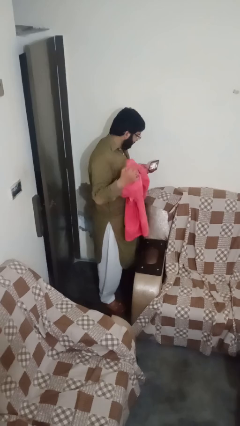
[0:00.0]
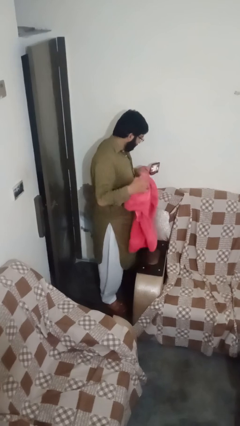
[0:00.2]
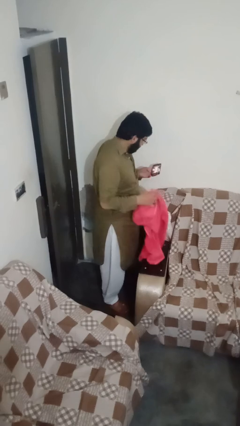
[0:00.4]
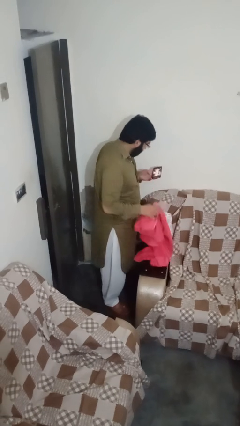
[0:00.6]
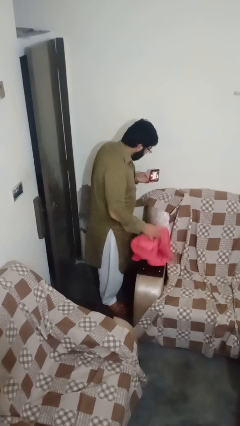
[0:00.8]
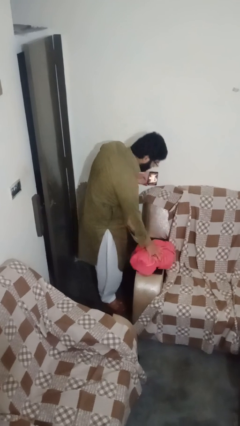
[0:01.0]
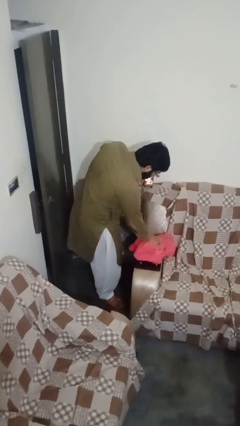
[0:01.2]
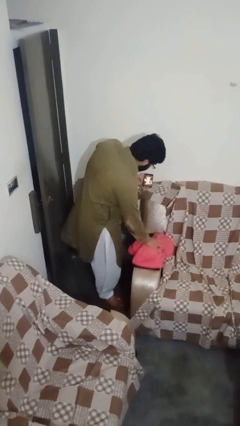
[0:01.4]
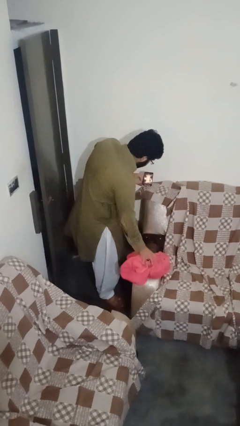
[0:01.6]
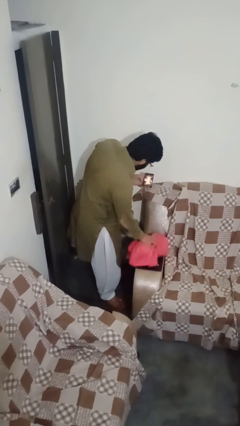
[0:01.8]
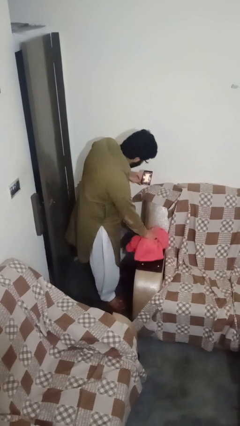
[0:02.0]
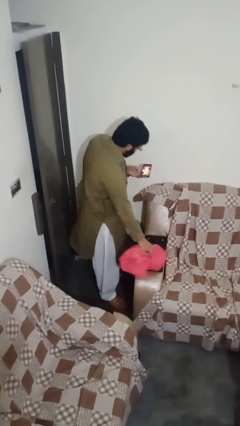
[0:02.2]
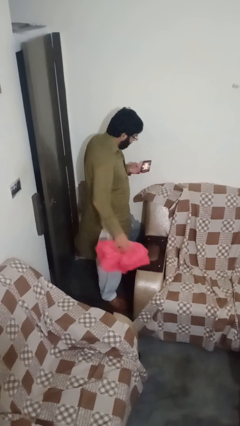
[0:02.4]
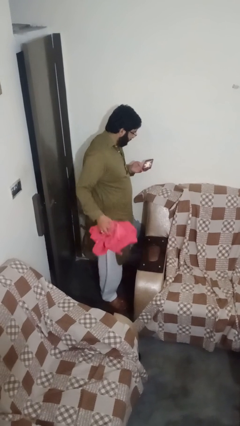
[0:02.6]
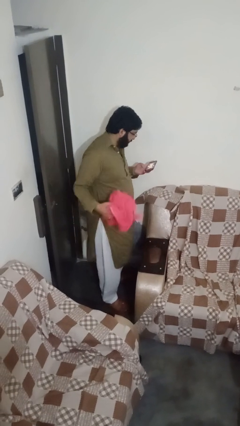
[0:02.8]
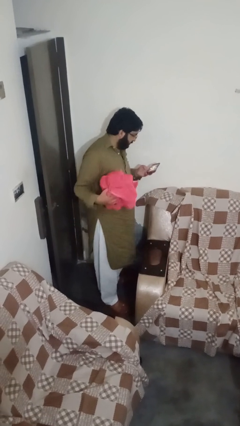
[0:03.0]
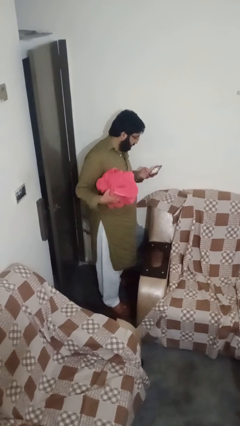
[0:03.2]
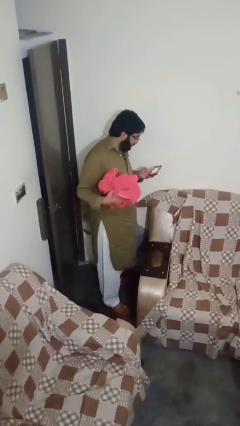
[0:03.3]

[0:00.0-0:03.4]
person dusts furniture

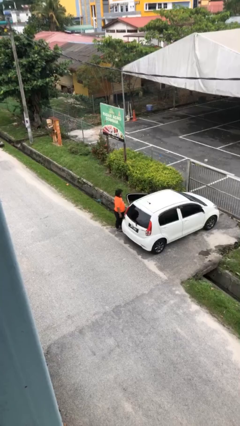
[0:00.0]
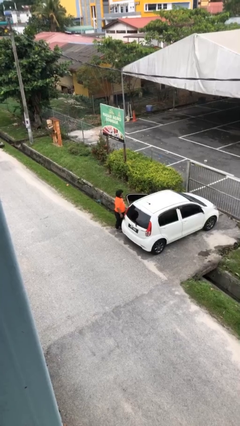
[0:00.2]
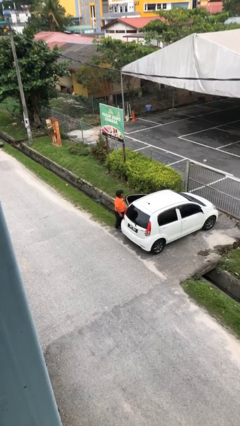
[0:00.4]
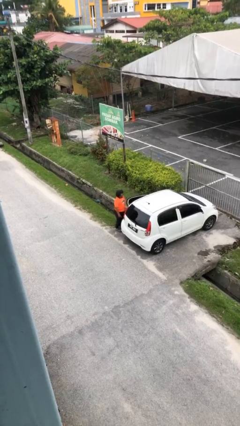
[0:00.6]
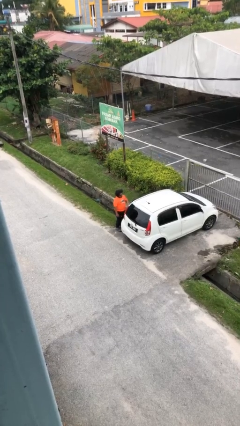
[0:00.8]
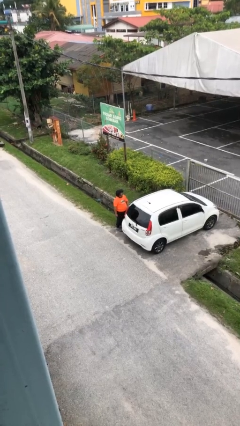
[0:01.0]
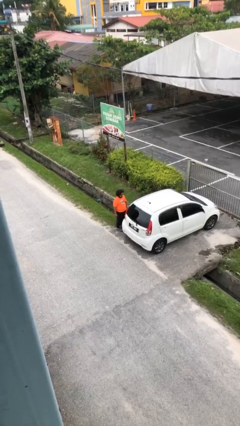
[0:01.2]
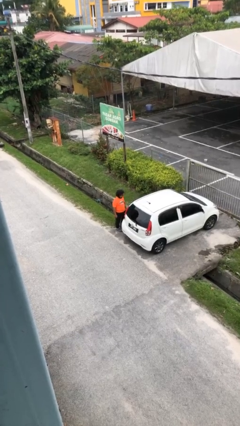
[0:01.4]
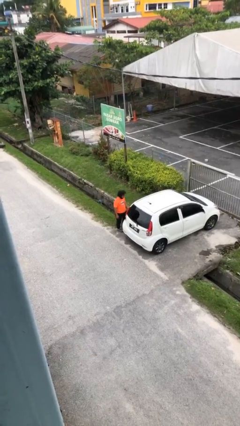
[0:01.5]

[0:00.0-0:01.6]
person closes car door

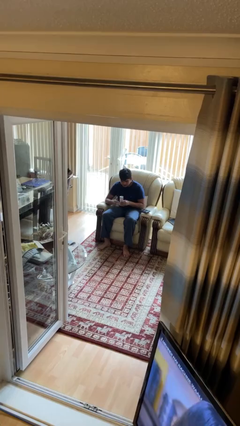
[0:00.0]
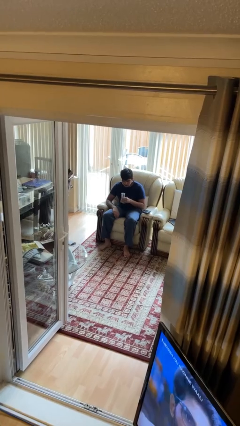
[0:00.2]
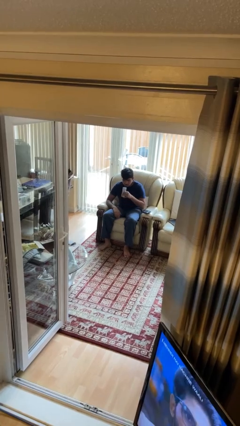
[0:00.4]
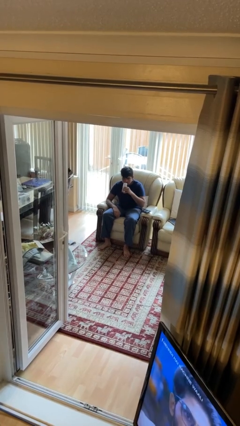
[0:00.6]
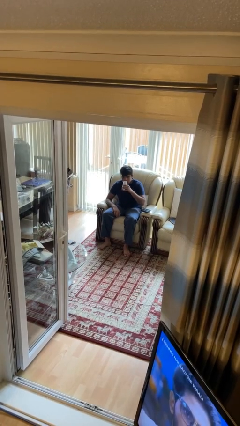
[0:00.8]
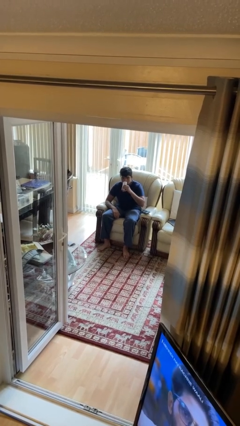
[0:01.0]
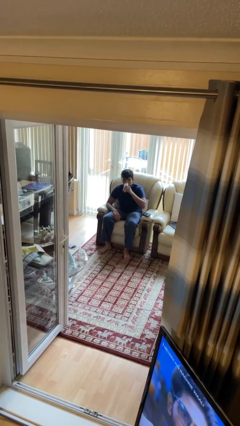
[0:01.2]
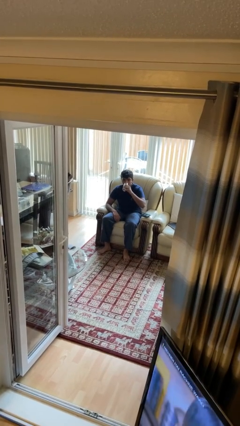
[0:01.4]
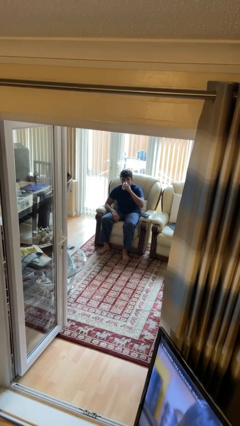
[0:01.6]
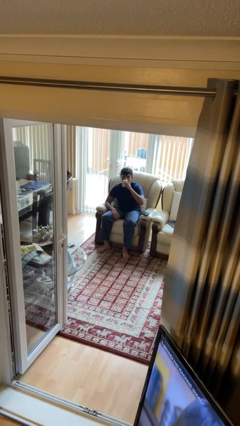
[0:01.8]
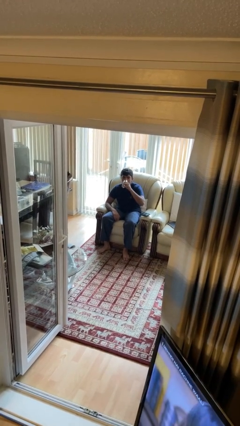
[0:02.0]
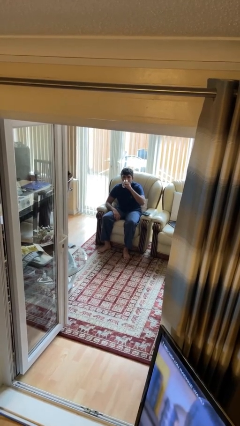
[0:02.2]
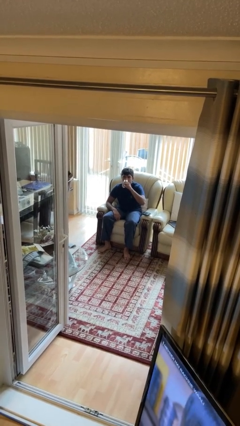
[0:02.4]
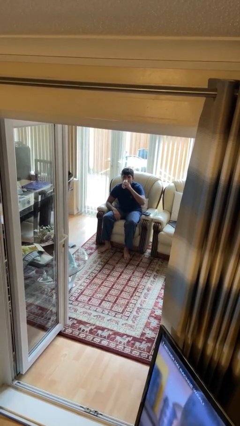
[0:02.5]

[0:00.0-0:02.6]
person drinks from beverage can

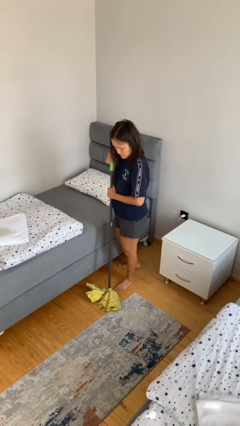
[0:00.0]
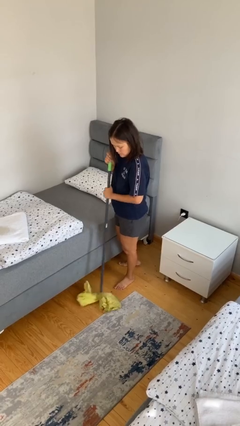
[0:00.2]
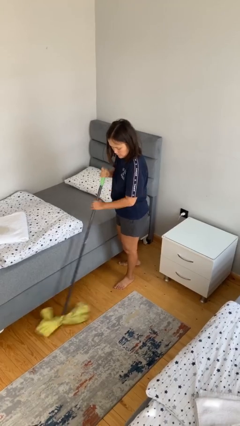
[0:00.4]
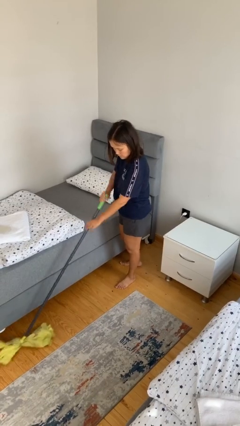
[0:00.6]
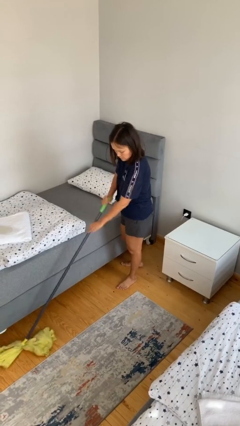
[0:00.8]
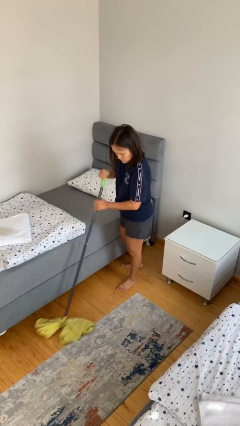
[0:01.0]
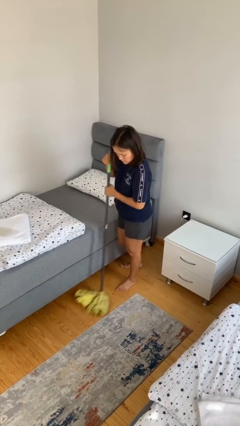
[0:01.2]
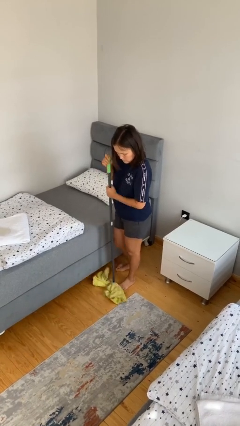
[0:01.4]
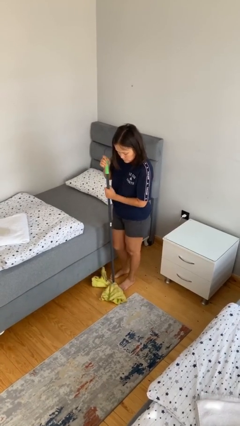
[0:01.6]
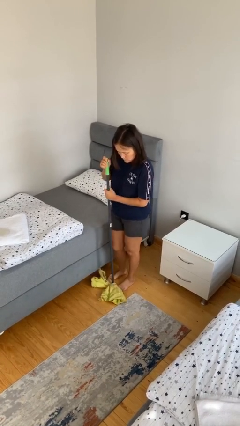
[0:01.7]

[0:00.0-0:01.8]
person sweeps floor

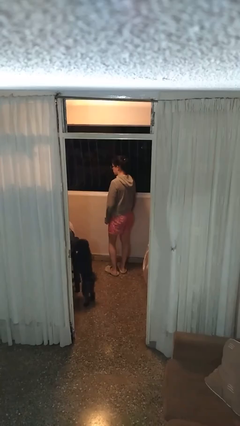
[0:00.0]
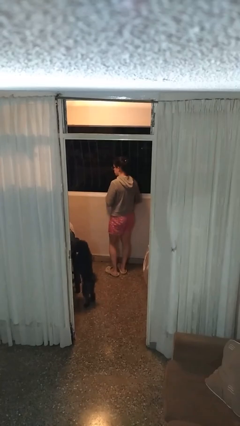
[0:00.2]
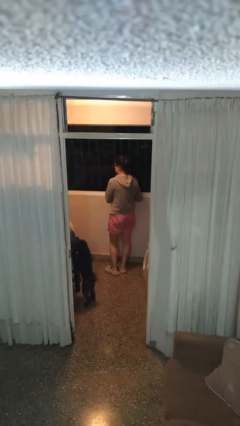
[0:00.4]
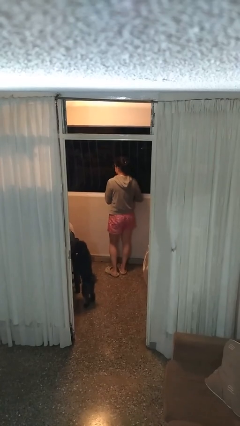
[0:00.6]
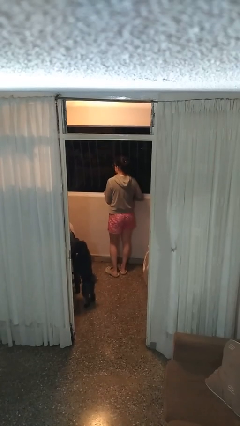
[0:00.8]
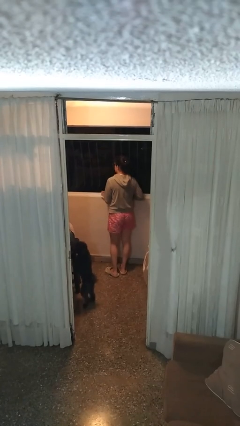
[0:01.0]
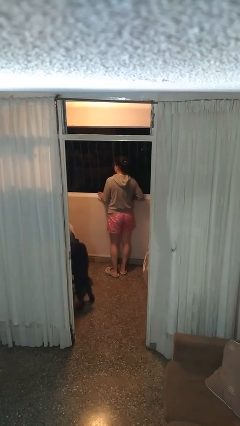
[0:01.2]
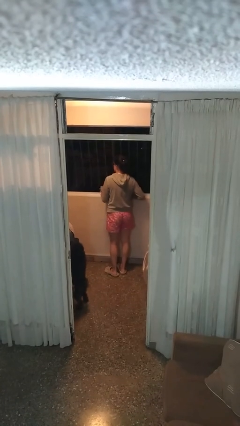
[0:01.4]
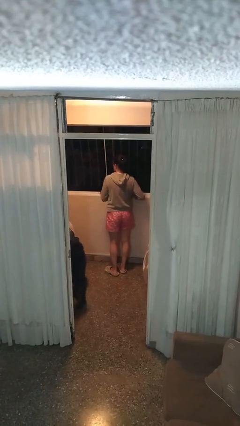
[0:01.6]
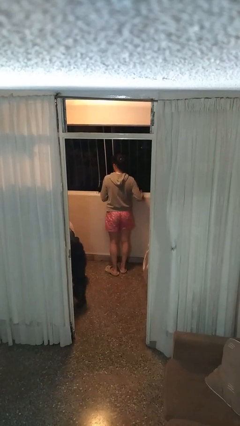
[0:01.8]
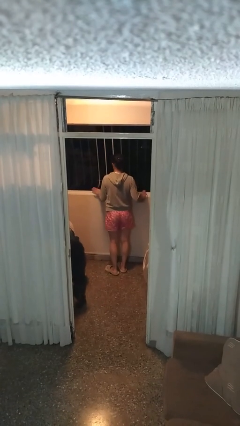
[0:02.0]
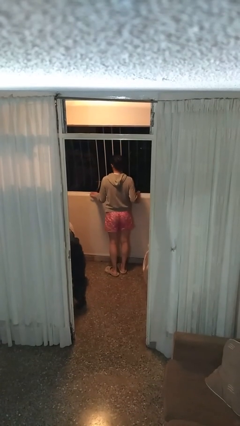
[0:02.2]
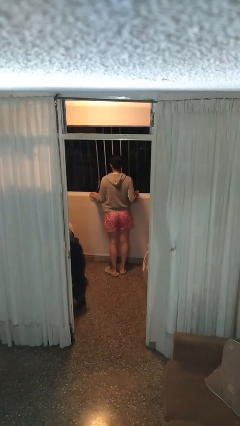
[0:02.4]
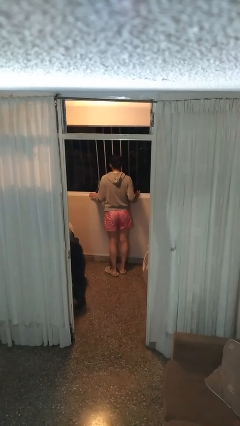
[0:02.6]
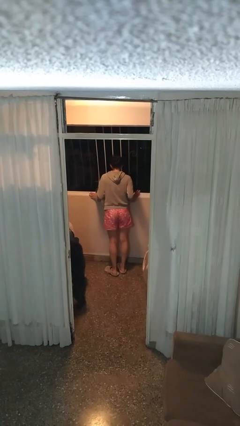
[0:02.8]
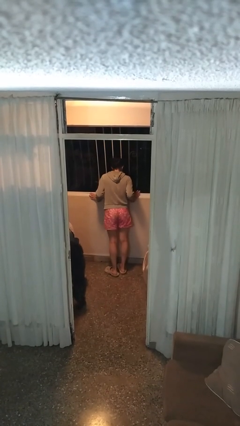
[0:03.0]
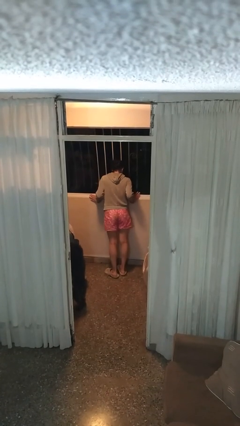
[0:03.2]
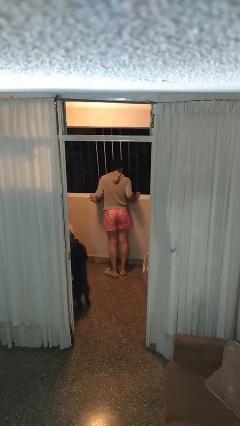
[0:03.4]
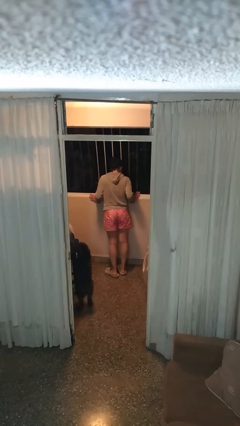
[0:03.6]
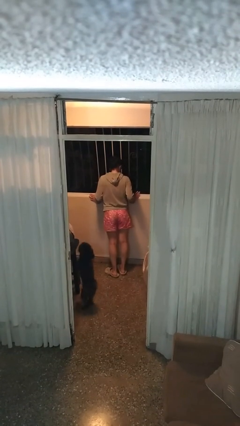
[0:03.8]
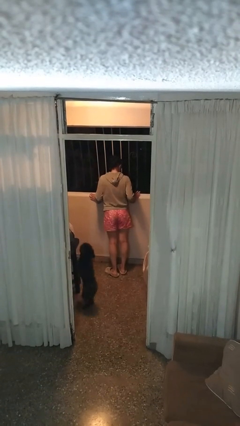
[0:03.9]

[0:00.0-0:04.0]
person opens home window

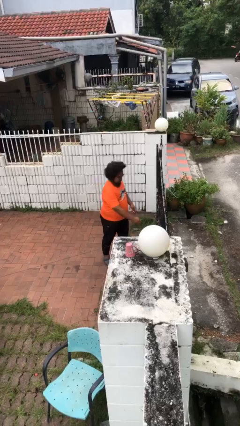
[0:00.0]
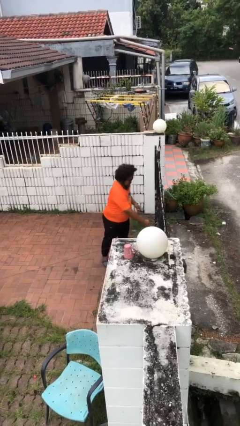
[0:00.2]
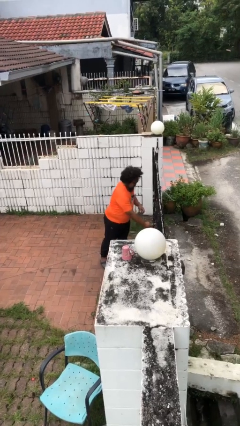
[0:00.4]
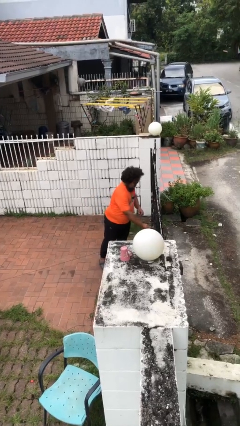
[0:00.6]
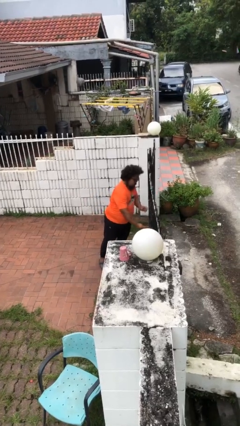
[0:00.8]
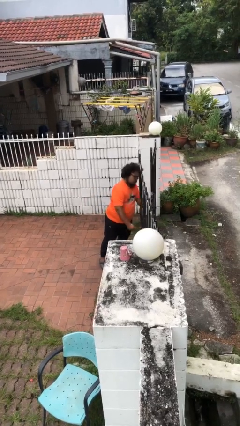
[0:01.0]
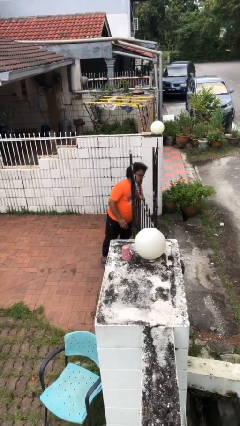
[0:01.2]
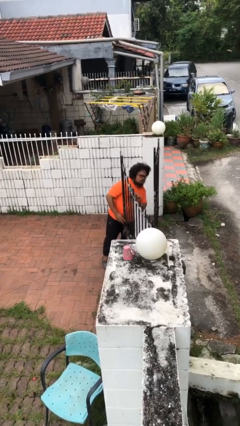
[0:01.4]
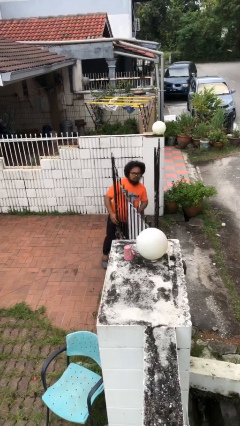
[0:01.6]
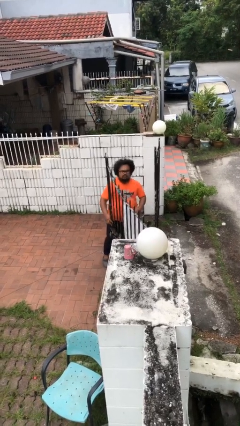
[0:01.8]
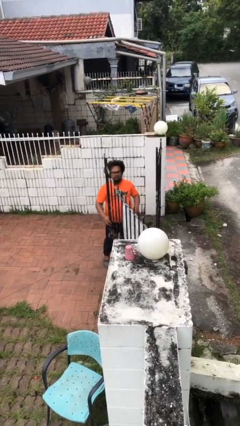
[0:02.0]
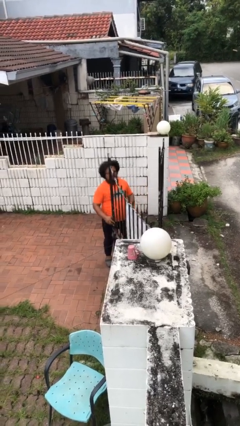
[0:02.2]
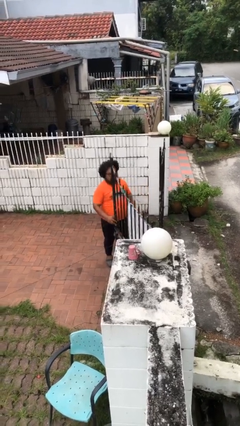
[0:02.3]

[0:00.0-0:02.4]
person opens facility door

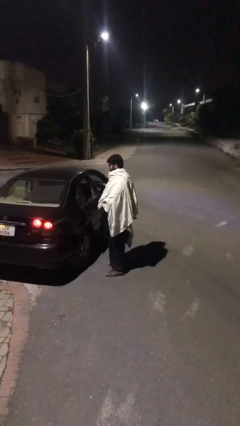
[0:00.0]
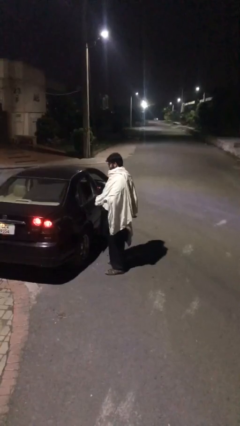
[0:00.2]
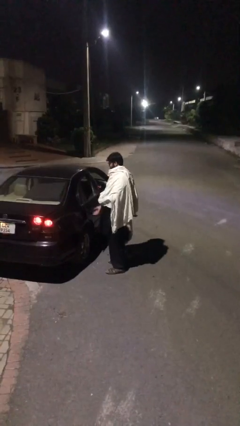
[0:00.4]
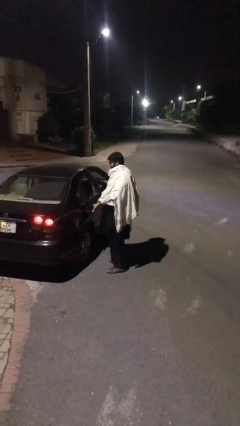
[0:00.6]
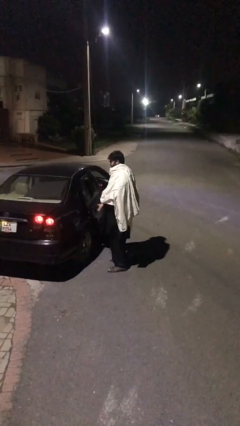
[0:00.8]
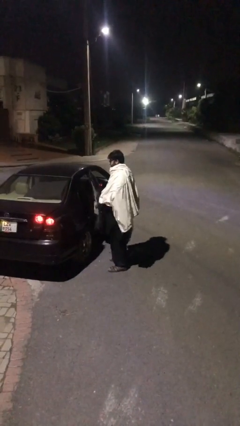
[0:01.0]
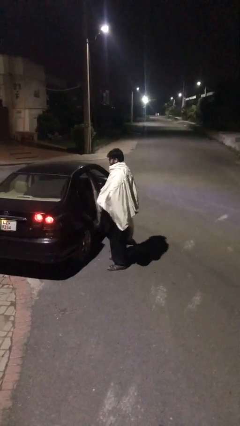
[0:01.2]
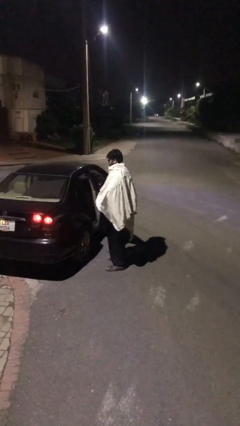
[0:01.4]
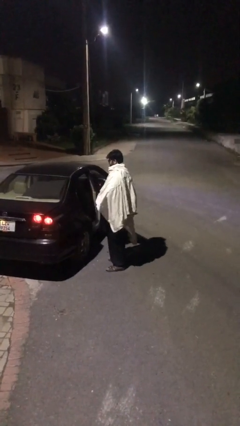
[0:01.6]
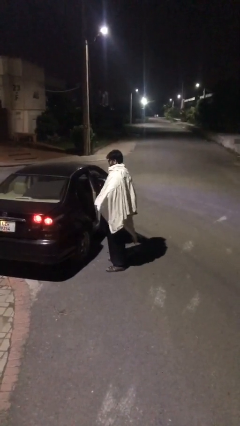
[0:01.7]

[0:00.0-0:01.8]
person opens car door
